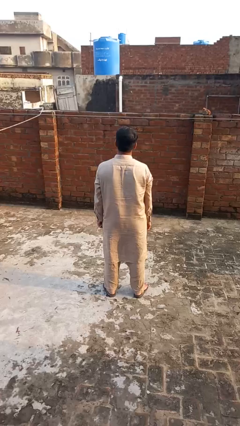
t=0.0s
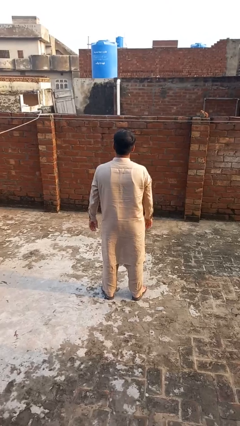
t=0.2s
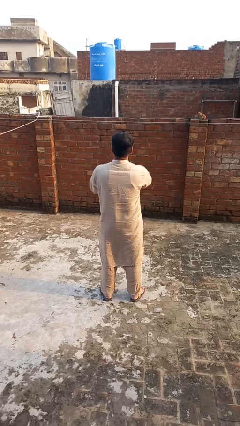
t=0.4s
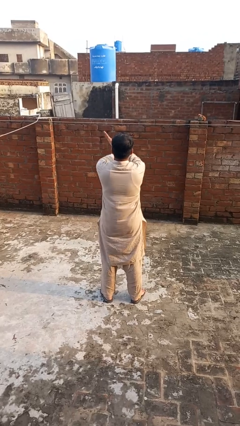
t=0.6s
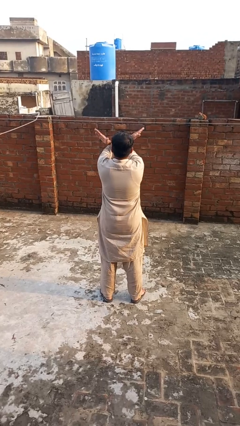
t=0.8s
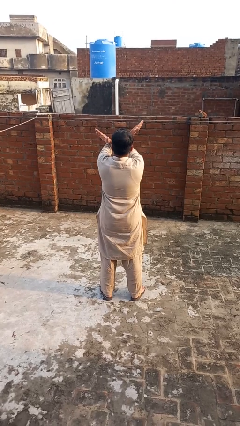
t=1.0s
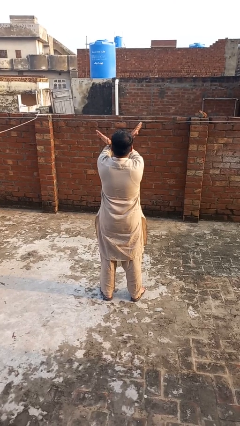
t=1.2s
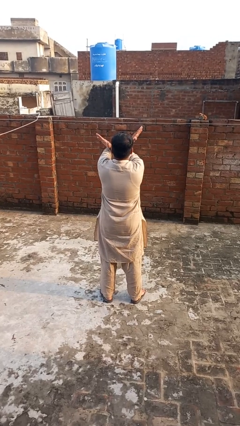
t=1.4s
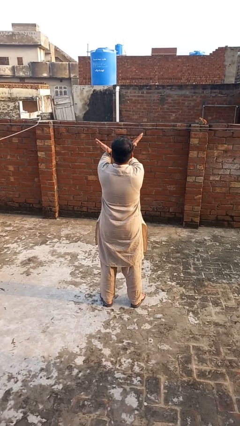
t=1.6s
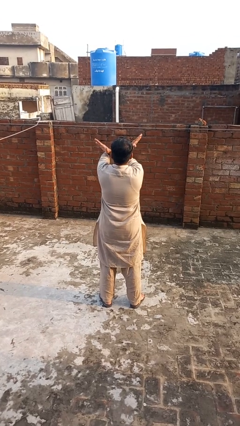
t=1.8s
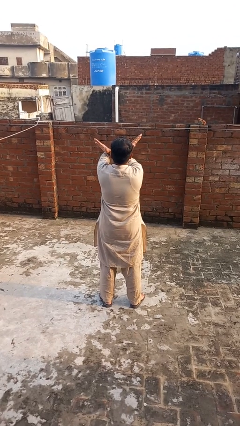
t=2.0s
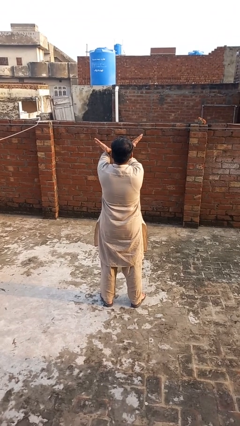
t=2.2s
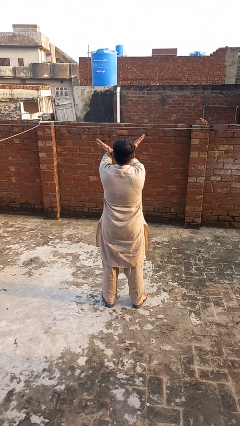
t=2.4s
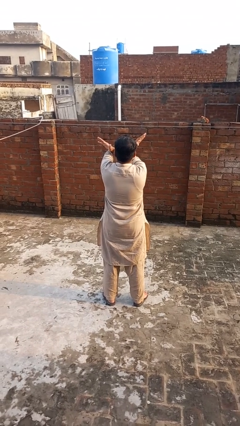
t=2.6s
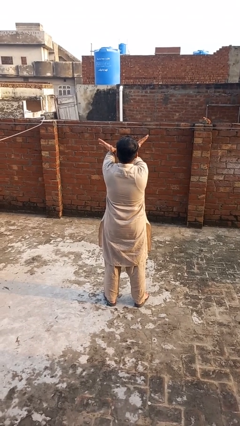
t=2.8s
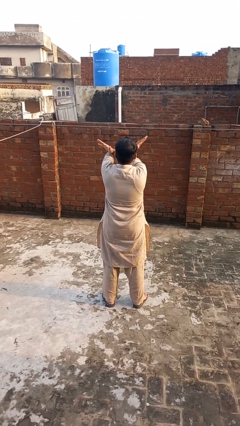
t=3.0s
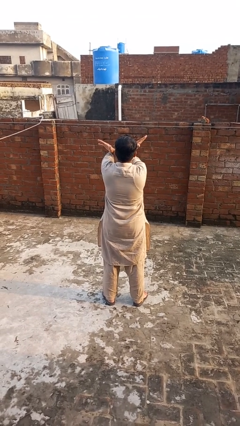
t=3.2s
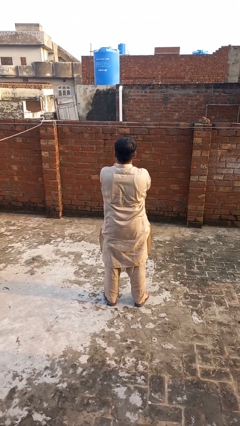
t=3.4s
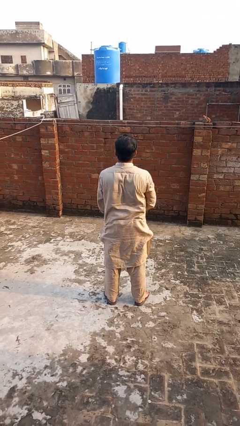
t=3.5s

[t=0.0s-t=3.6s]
person gestures arms x

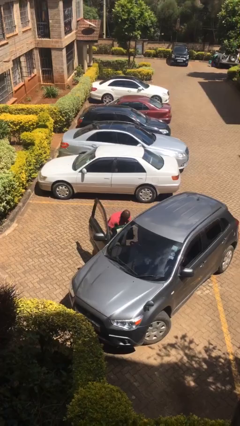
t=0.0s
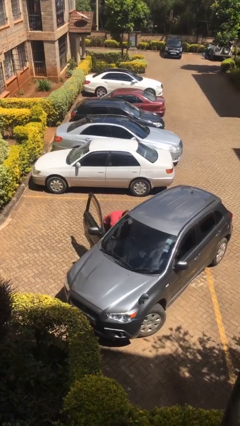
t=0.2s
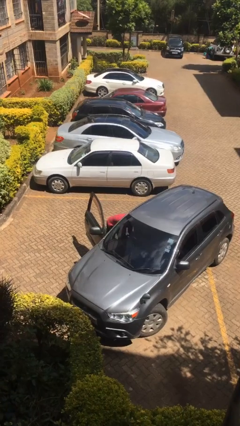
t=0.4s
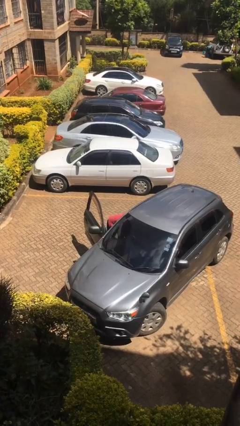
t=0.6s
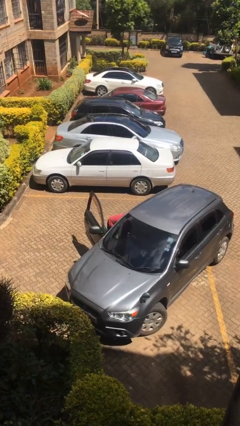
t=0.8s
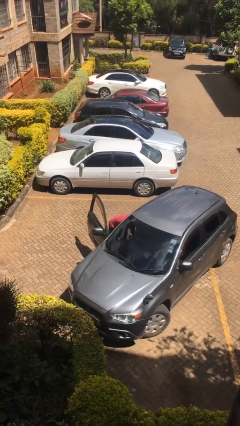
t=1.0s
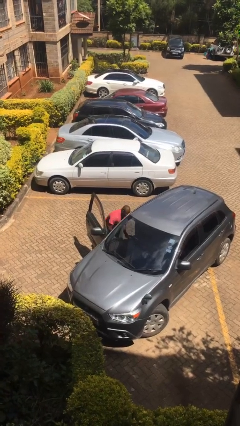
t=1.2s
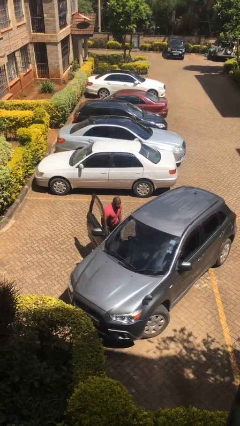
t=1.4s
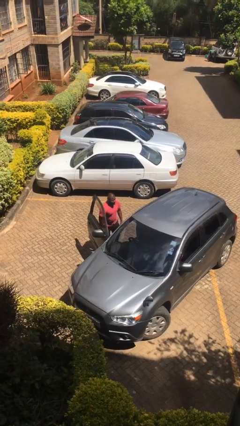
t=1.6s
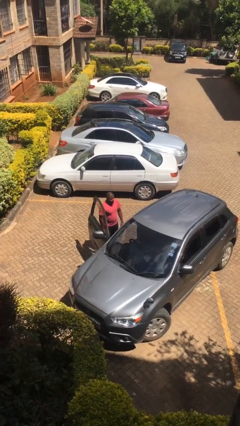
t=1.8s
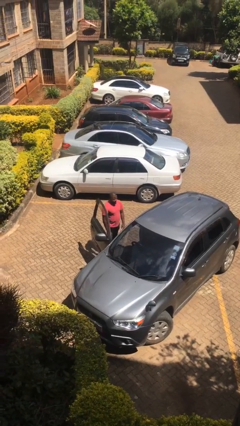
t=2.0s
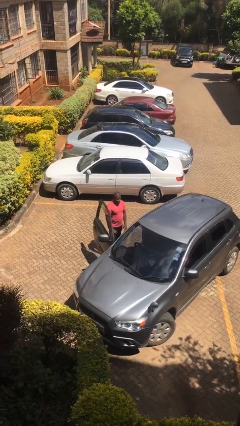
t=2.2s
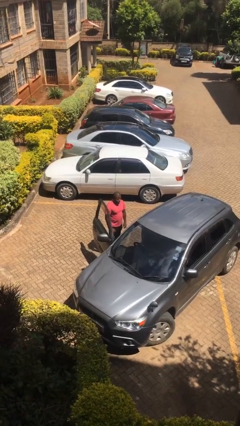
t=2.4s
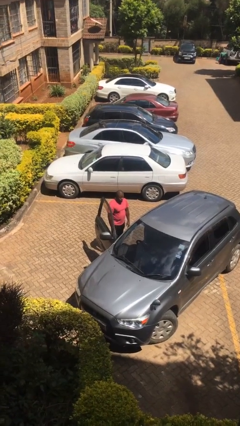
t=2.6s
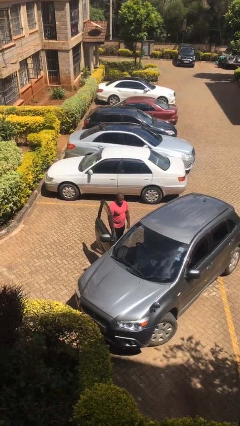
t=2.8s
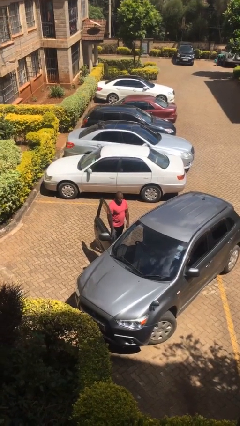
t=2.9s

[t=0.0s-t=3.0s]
person loads car

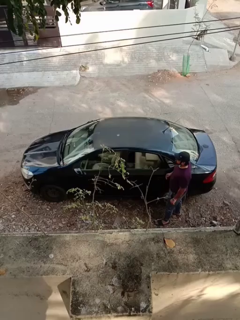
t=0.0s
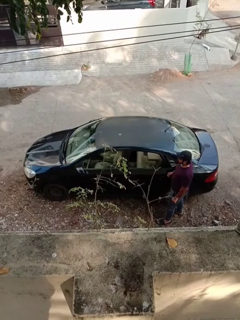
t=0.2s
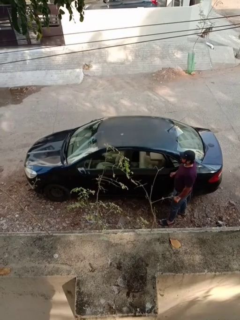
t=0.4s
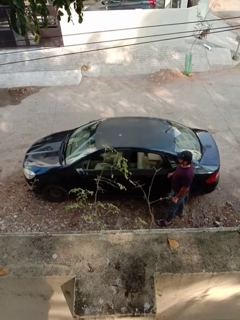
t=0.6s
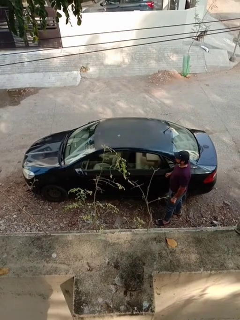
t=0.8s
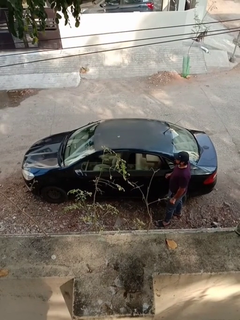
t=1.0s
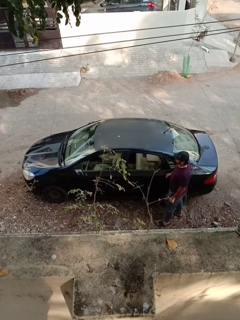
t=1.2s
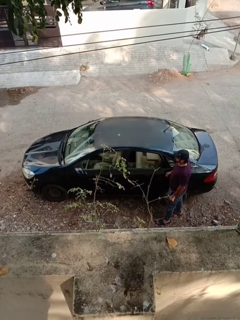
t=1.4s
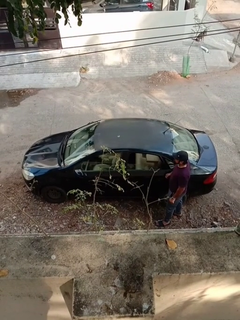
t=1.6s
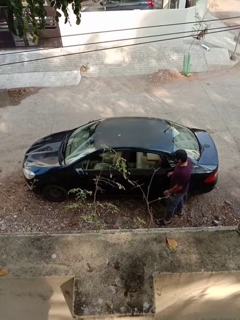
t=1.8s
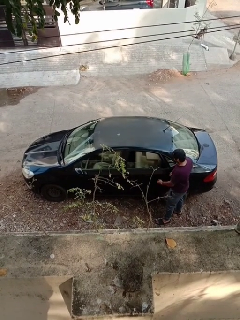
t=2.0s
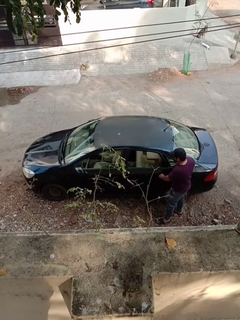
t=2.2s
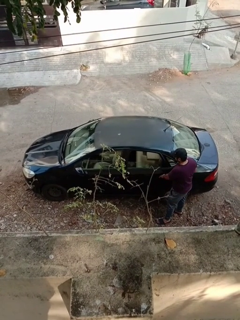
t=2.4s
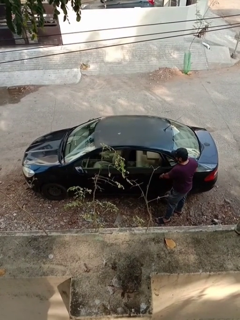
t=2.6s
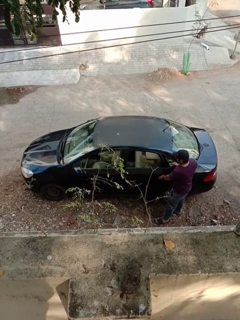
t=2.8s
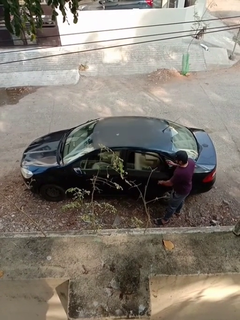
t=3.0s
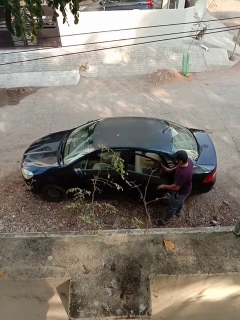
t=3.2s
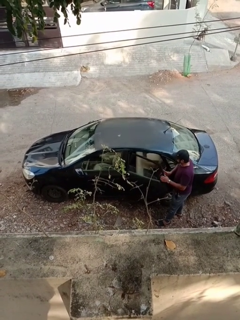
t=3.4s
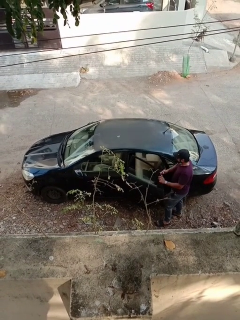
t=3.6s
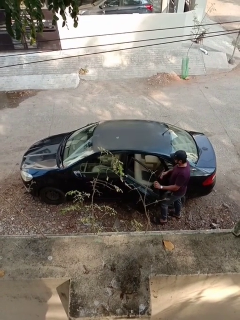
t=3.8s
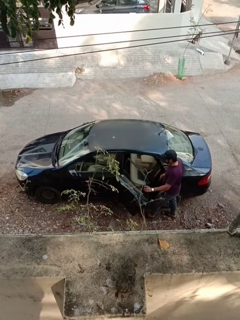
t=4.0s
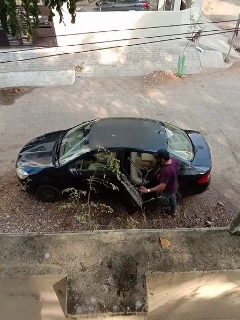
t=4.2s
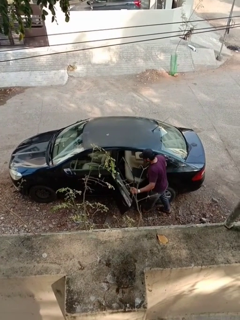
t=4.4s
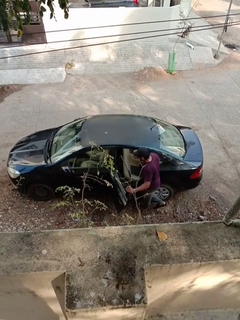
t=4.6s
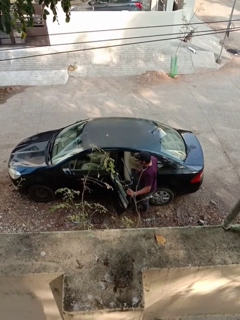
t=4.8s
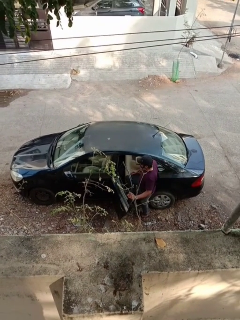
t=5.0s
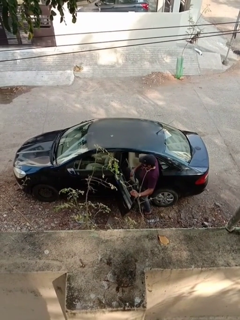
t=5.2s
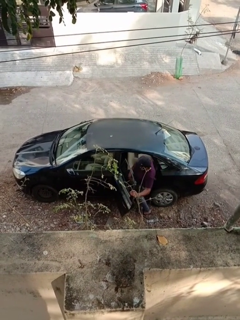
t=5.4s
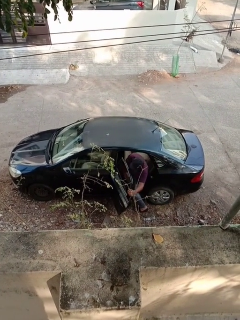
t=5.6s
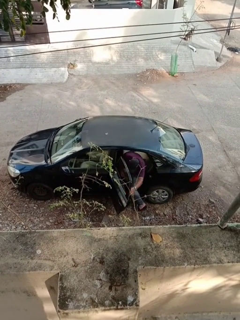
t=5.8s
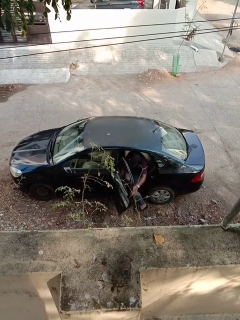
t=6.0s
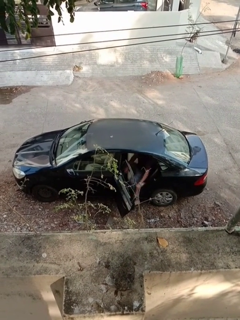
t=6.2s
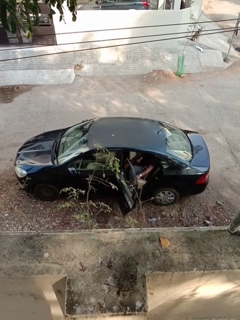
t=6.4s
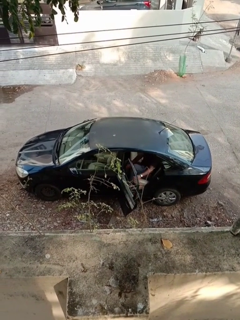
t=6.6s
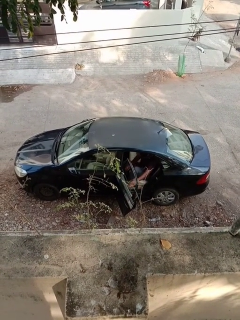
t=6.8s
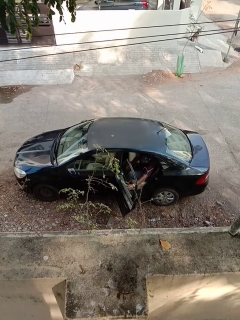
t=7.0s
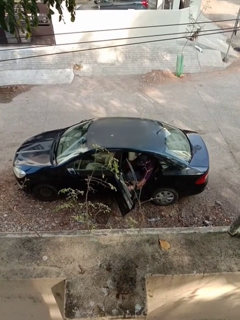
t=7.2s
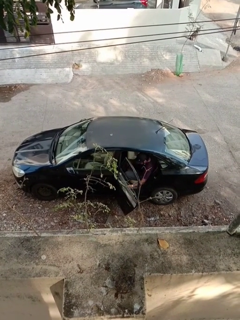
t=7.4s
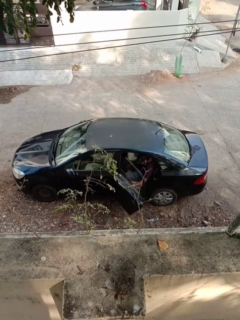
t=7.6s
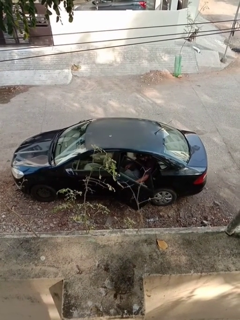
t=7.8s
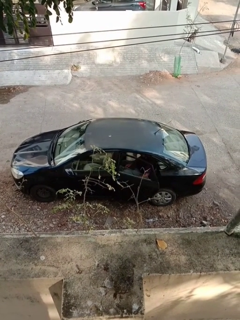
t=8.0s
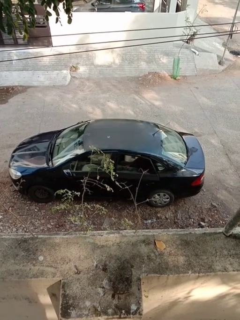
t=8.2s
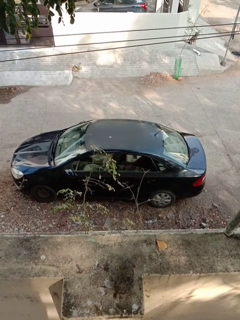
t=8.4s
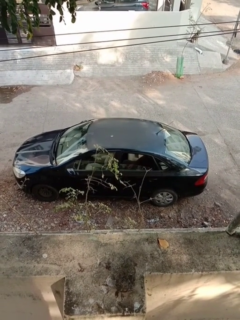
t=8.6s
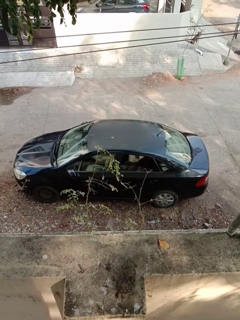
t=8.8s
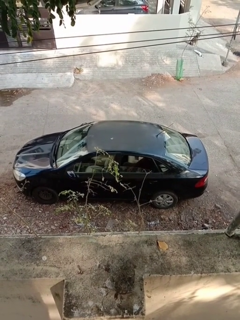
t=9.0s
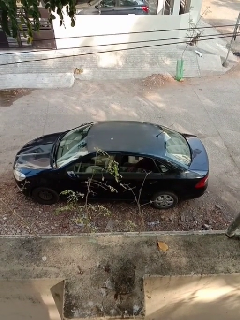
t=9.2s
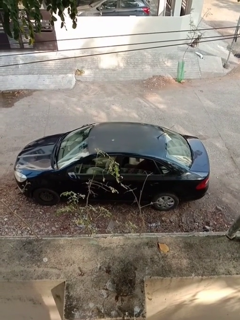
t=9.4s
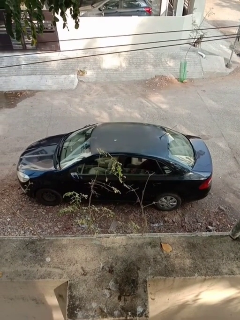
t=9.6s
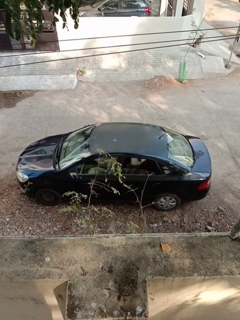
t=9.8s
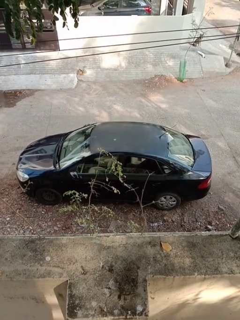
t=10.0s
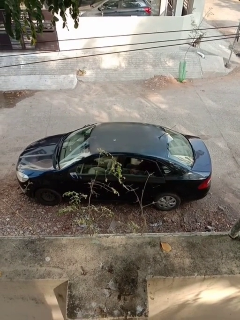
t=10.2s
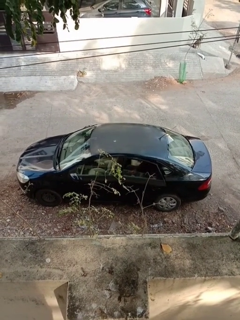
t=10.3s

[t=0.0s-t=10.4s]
car picks up person

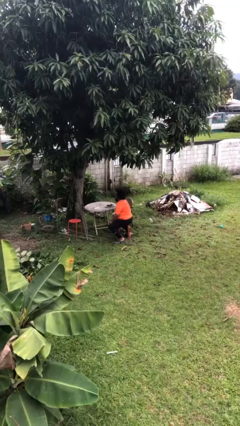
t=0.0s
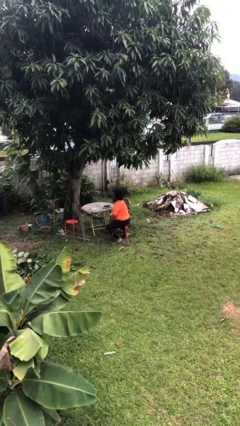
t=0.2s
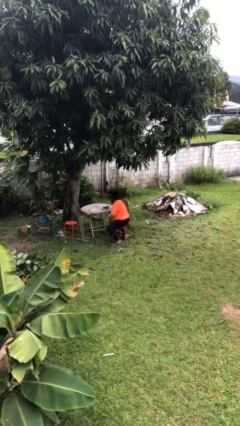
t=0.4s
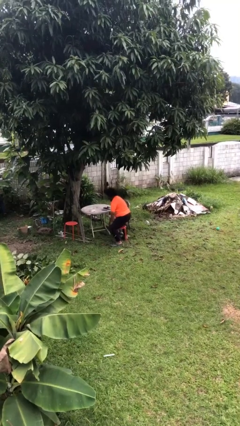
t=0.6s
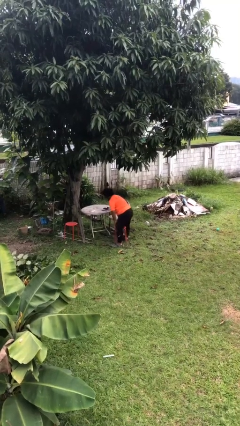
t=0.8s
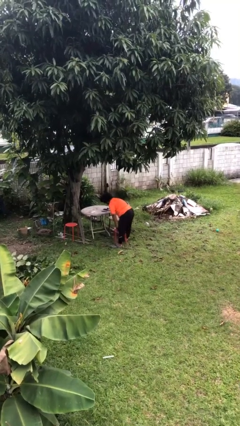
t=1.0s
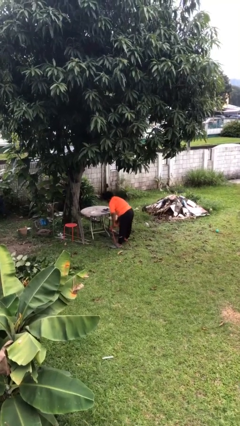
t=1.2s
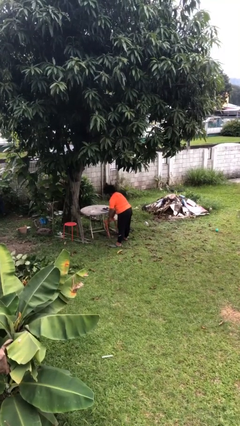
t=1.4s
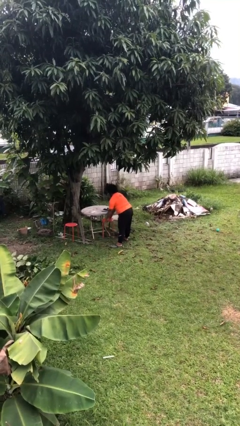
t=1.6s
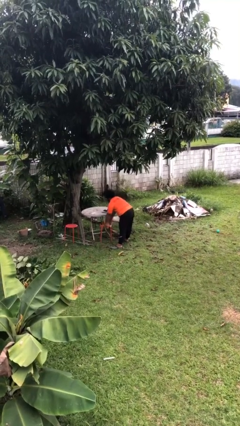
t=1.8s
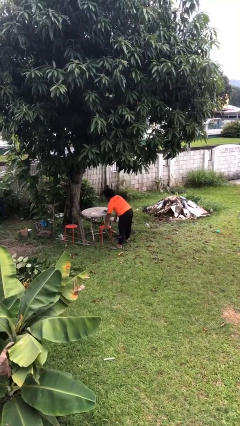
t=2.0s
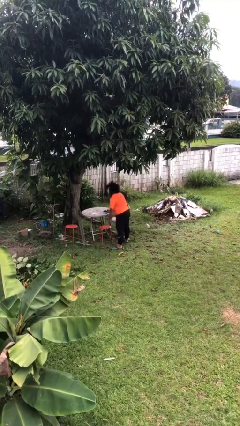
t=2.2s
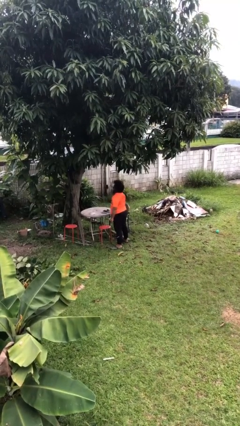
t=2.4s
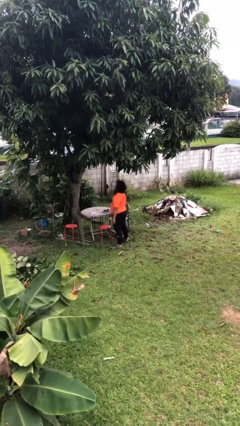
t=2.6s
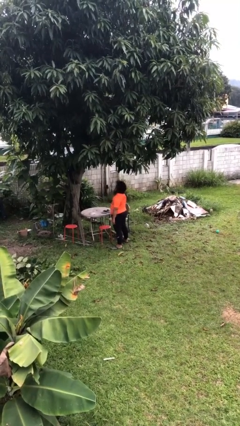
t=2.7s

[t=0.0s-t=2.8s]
person stands up

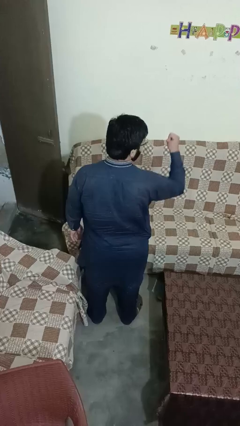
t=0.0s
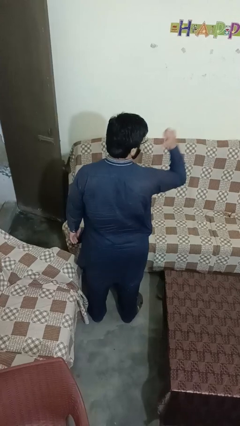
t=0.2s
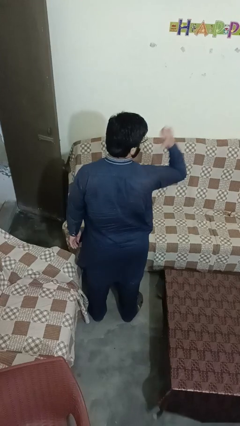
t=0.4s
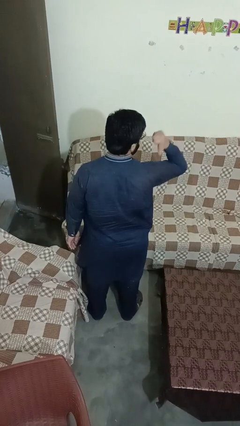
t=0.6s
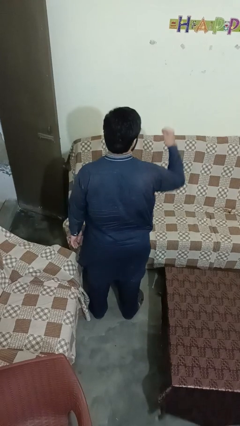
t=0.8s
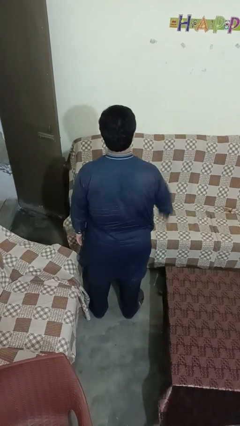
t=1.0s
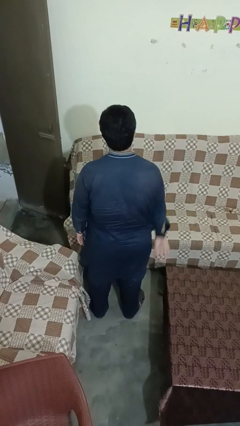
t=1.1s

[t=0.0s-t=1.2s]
person gestures behind me
